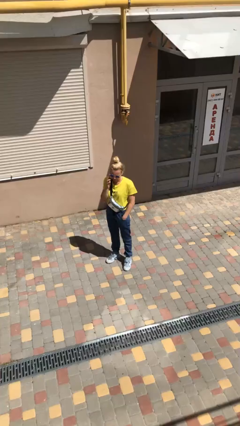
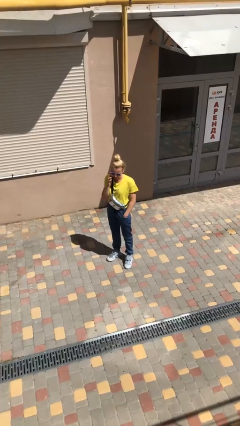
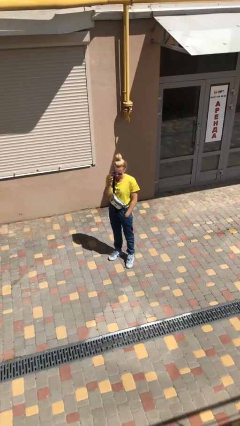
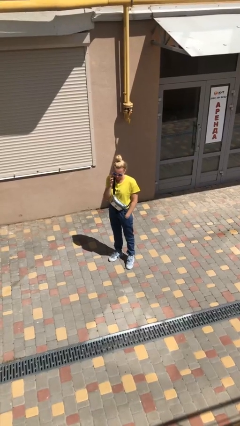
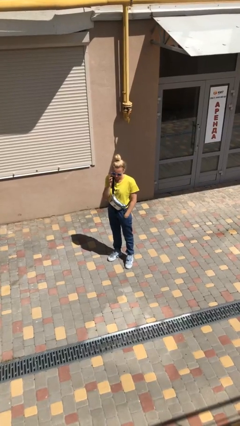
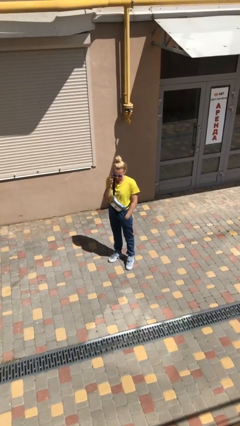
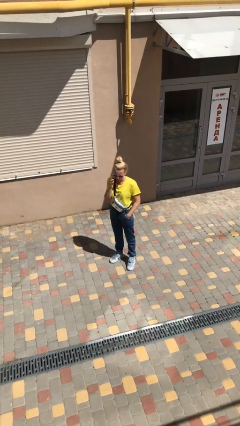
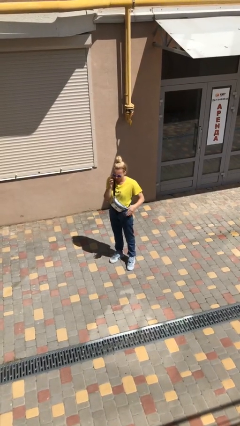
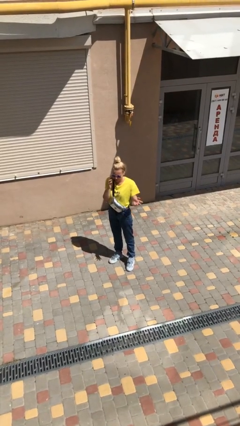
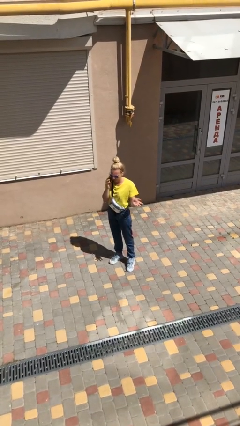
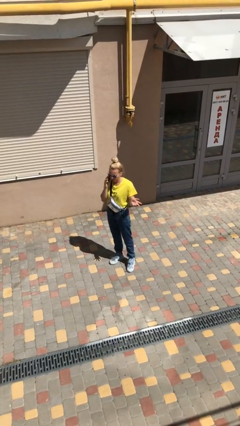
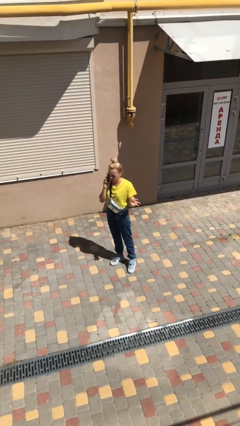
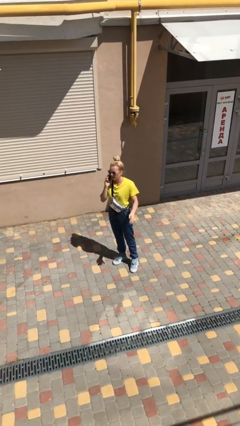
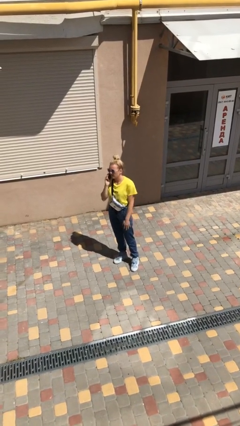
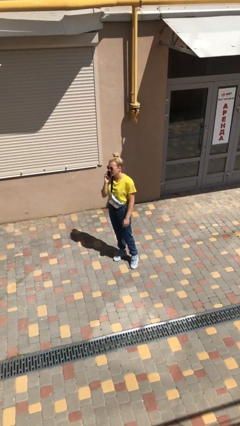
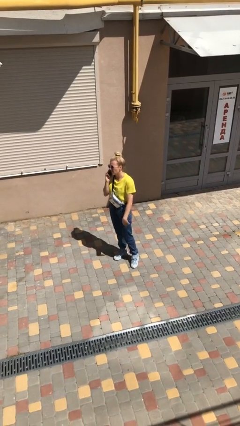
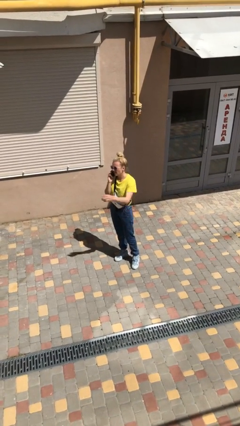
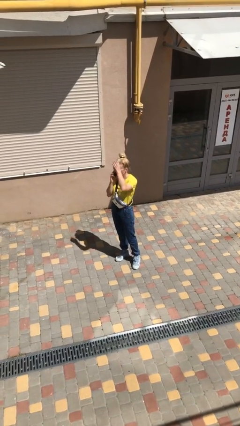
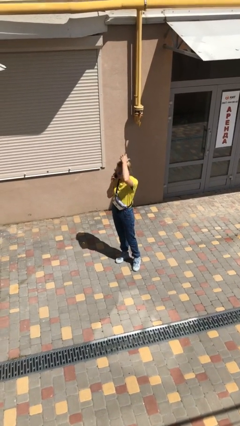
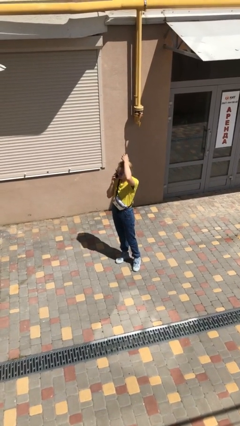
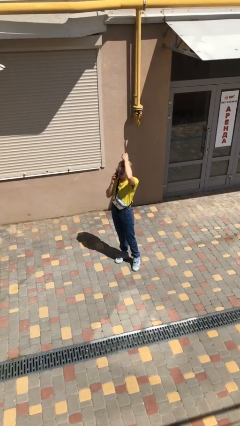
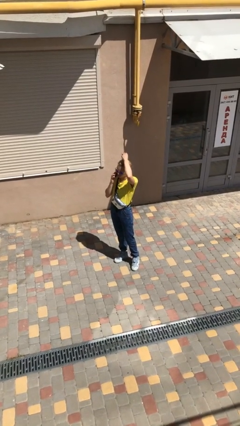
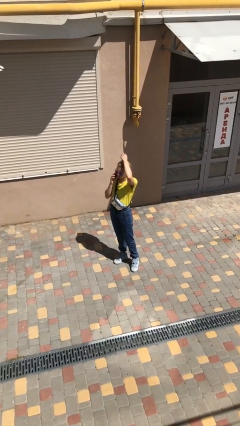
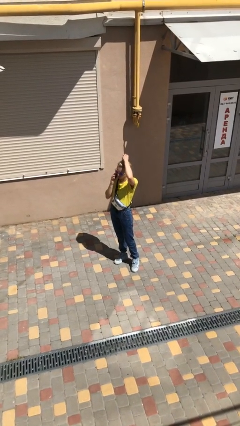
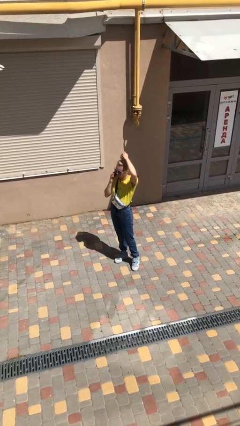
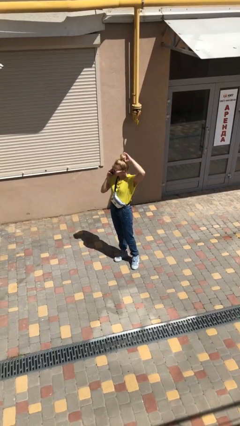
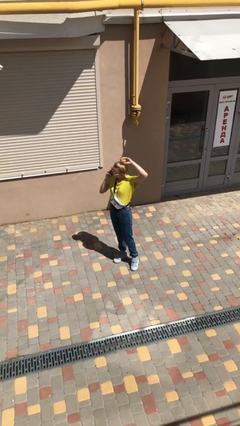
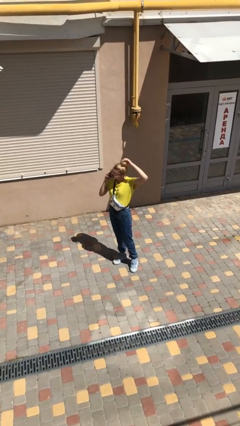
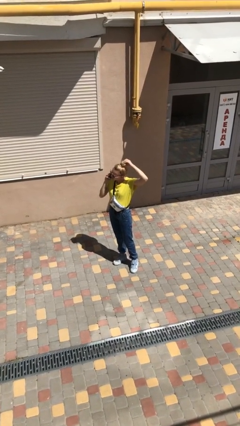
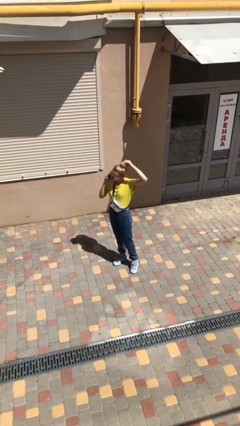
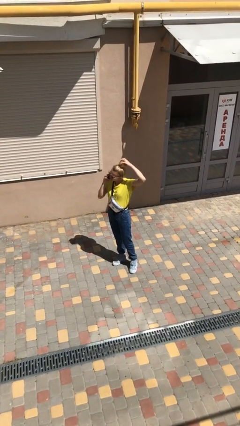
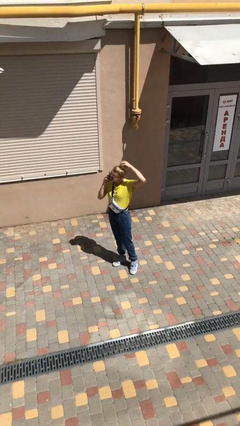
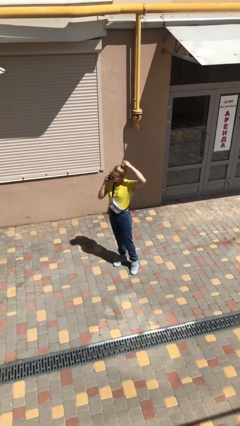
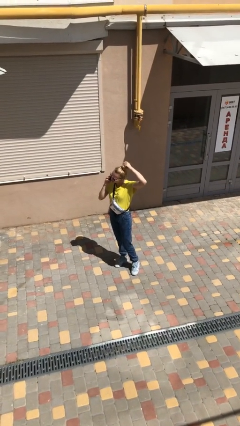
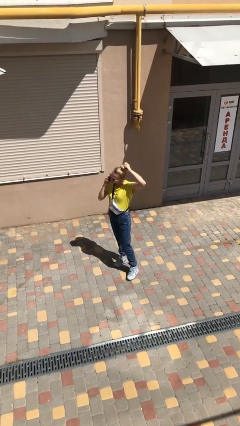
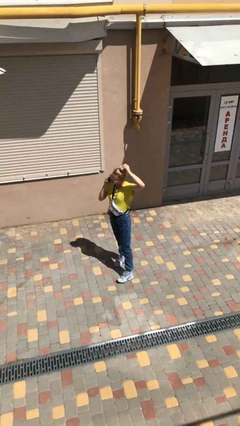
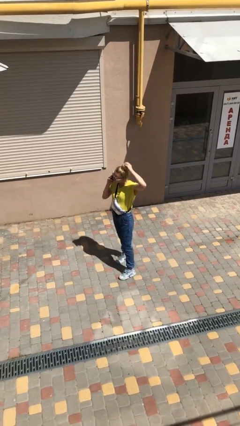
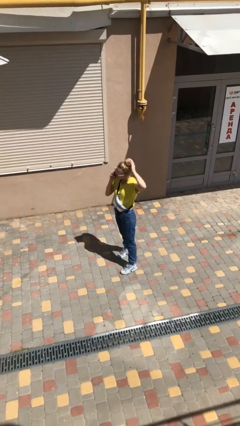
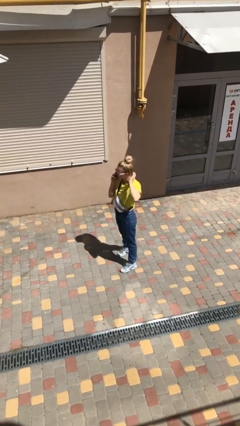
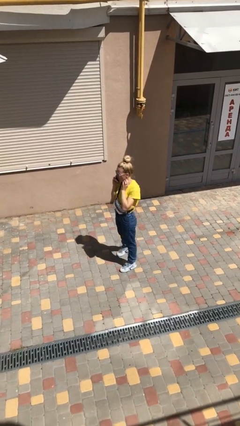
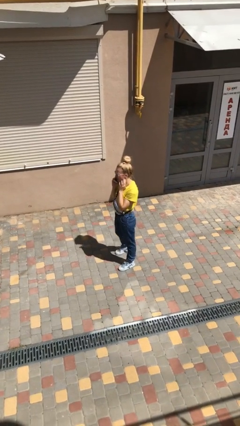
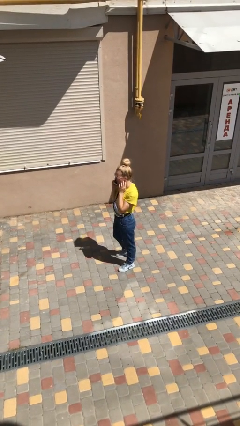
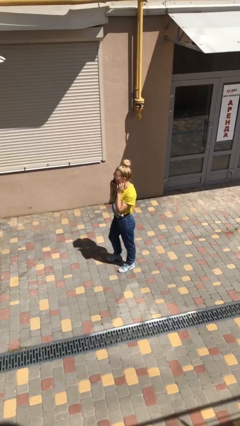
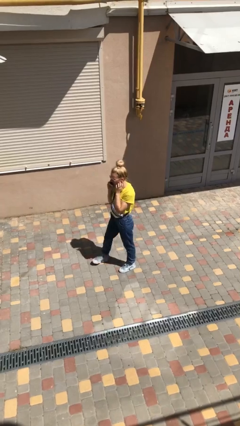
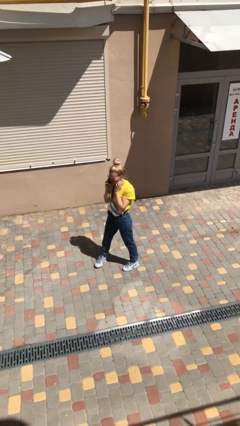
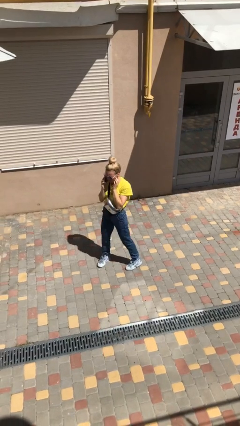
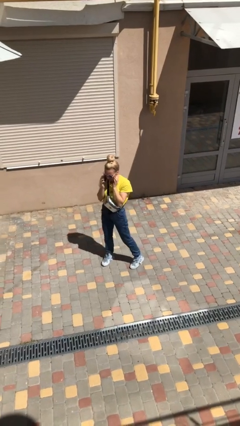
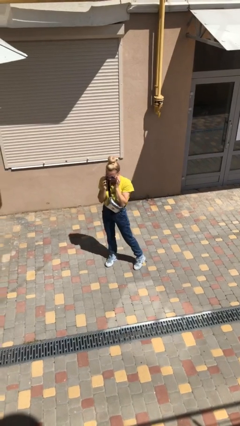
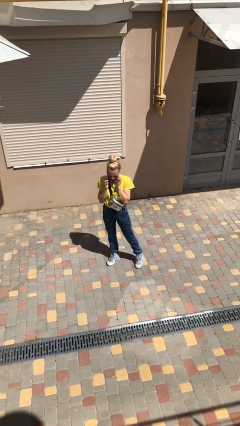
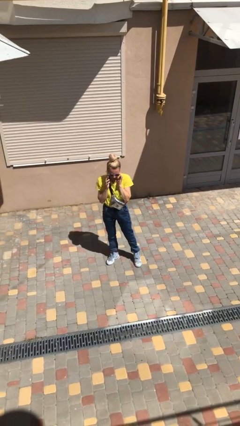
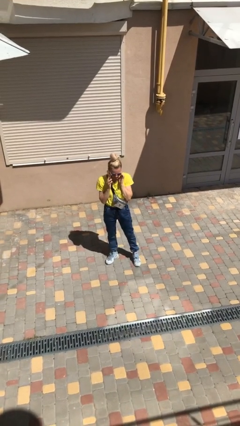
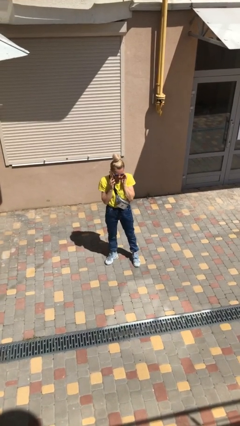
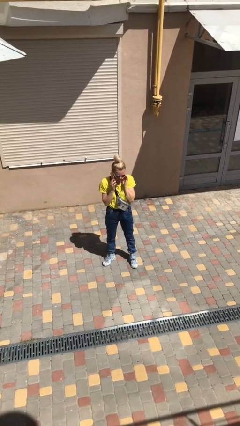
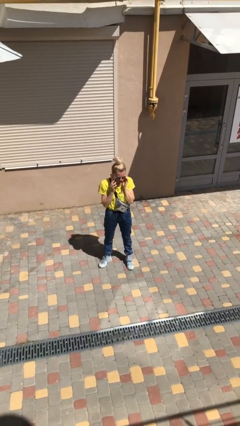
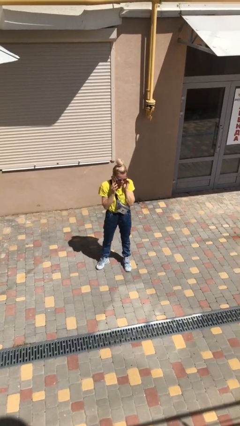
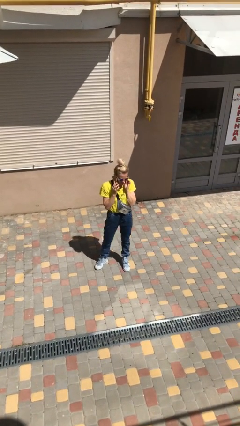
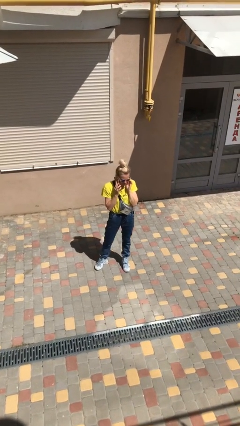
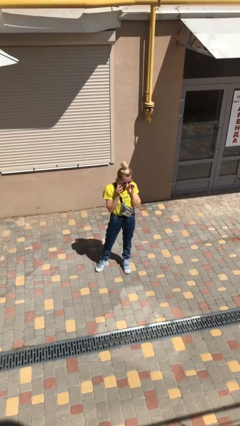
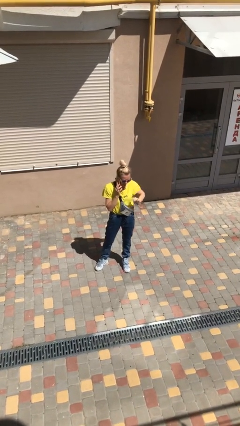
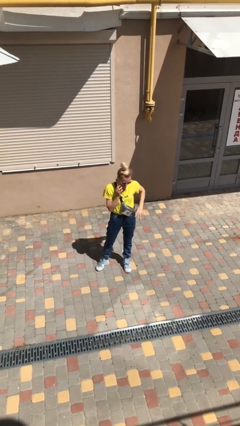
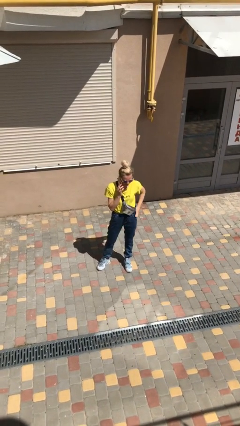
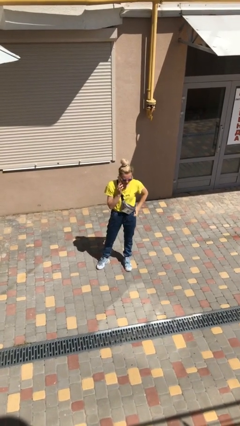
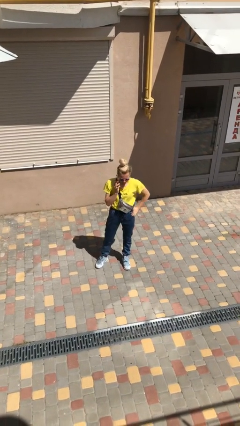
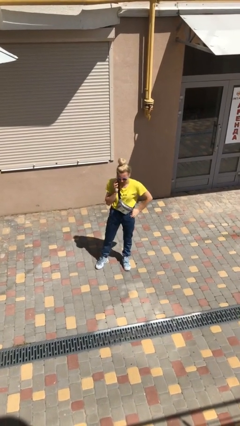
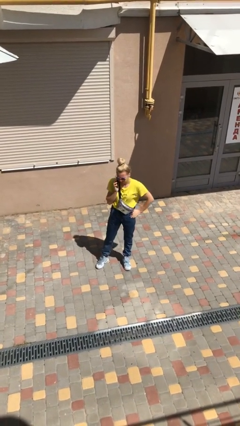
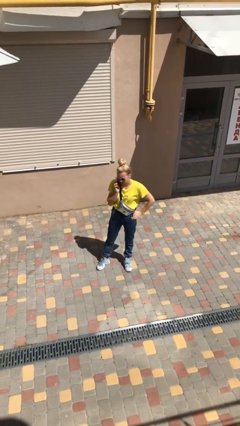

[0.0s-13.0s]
person talks on phone

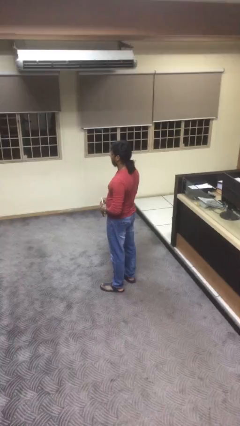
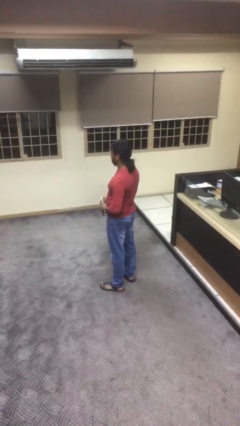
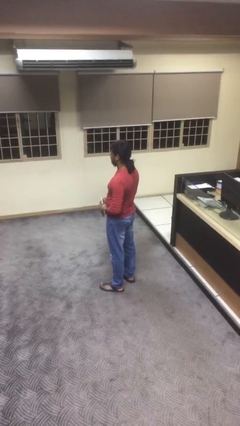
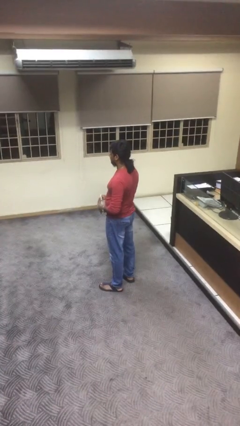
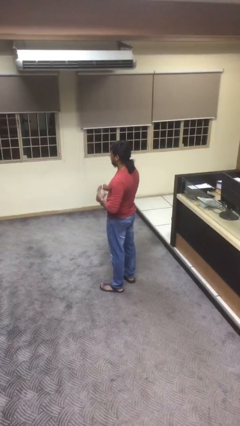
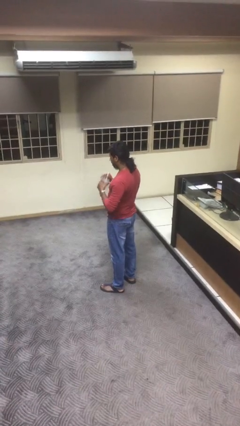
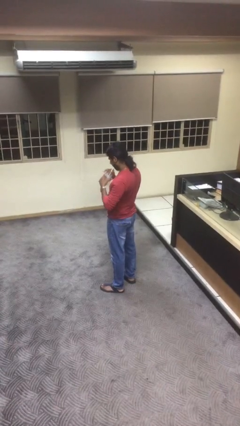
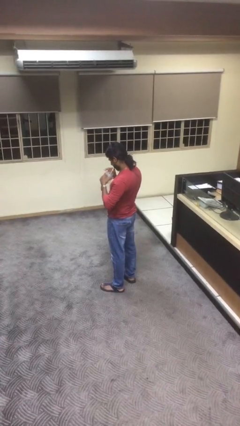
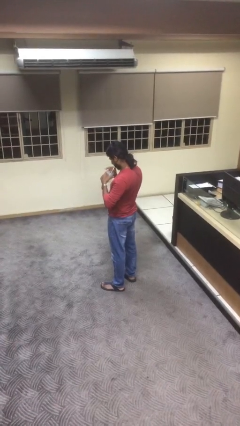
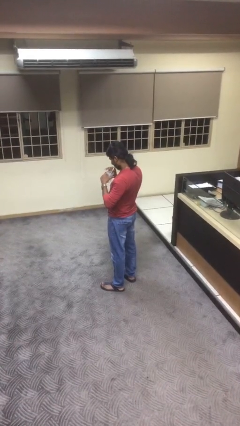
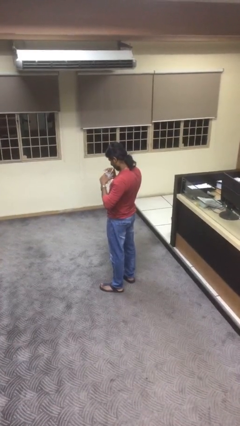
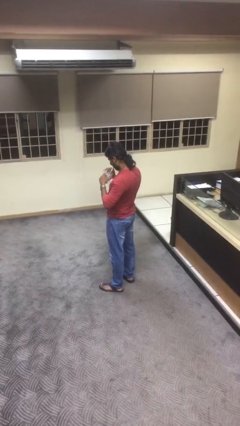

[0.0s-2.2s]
person drinks from straw

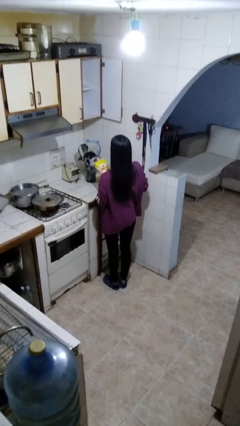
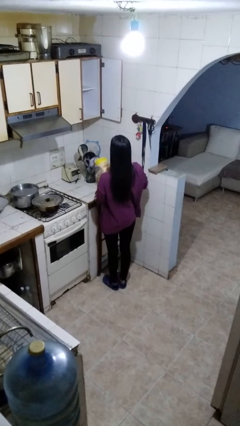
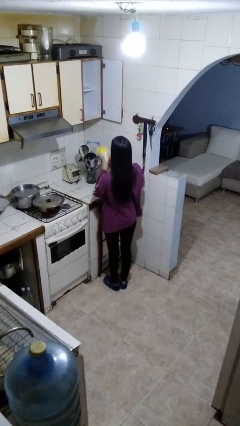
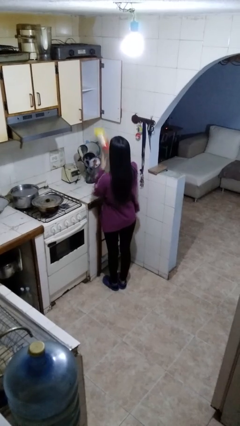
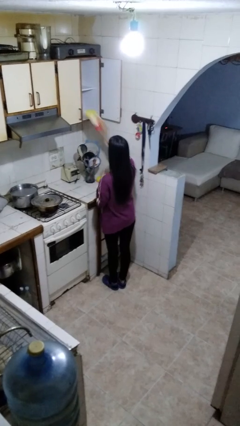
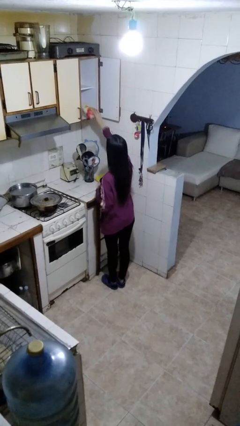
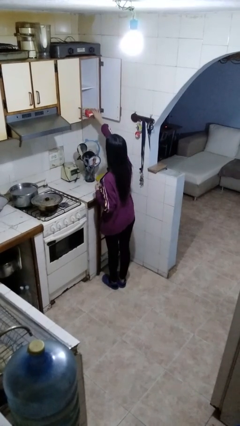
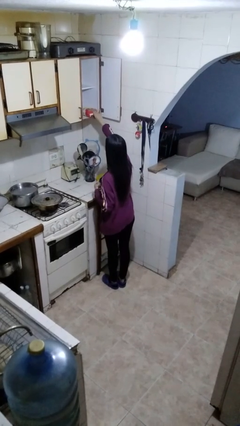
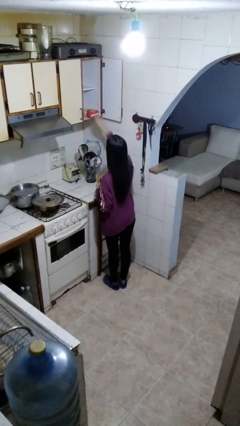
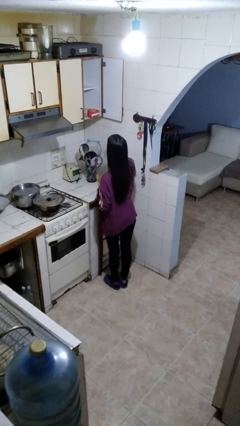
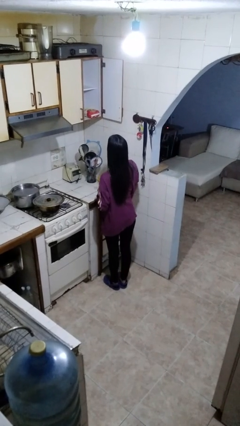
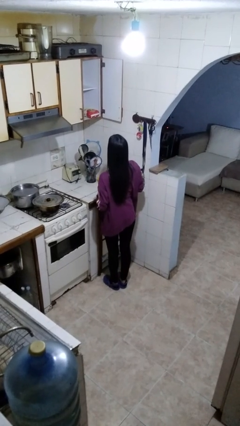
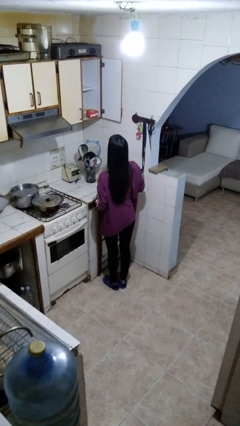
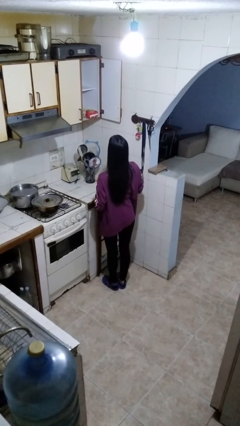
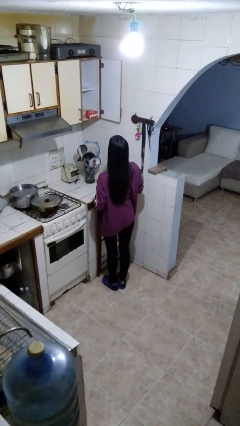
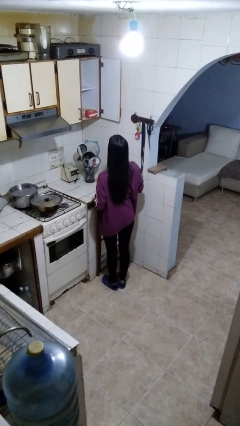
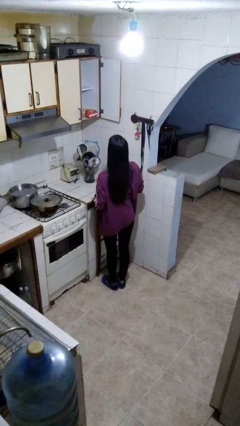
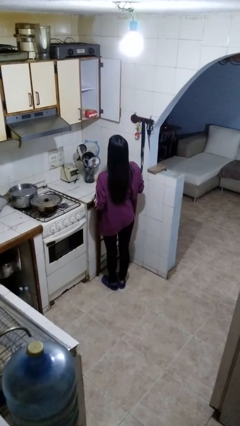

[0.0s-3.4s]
person picks up object from cabinet
